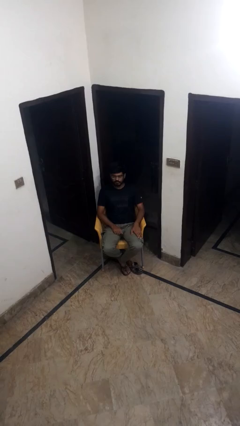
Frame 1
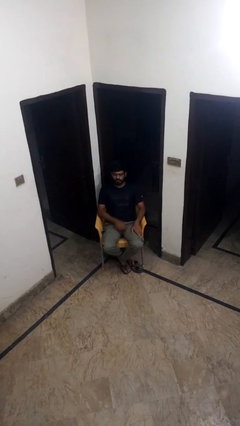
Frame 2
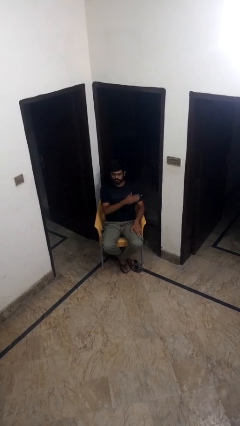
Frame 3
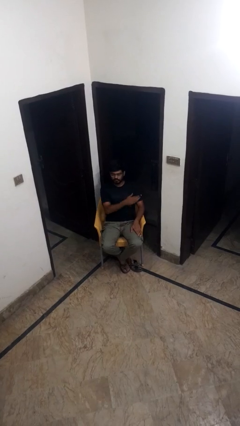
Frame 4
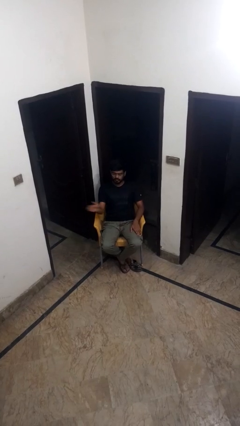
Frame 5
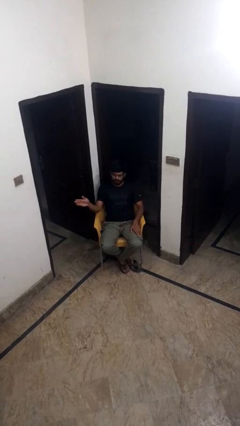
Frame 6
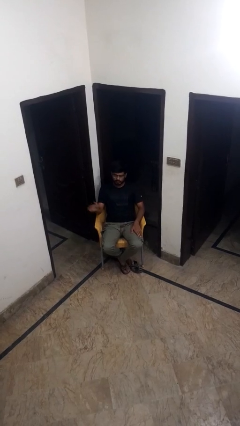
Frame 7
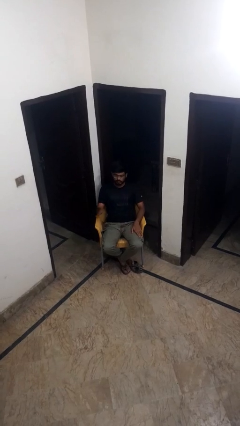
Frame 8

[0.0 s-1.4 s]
person gestures swipe right

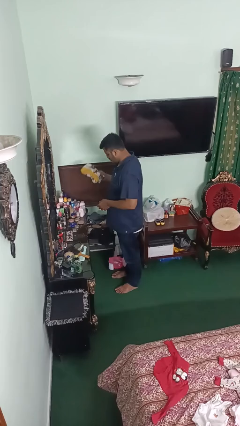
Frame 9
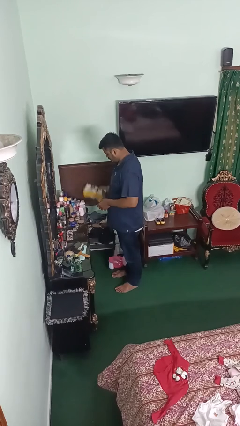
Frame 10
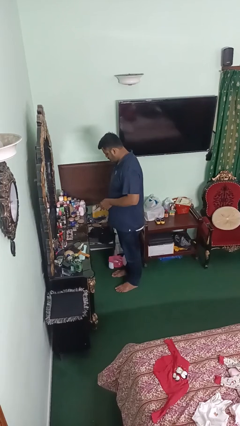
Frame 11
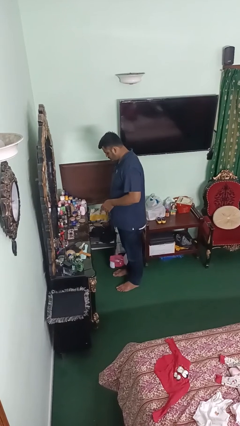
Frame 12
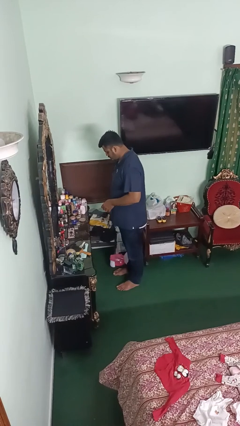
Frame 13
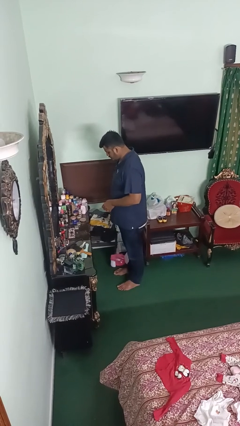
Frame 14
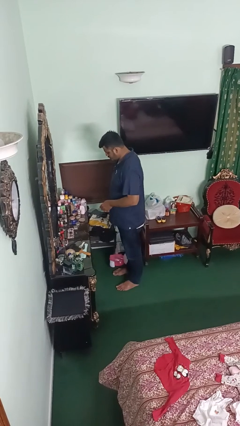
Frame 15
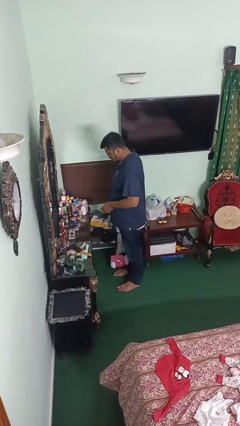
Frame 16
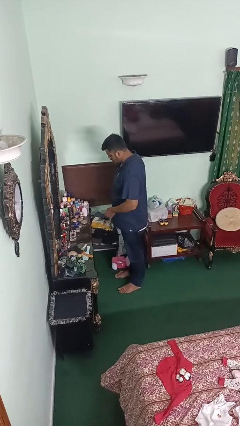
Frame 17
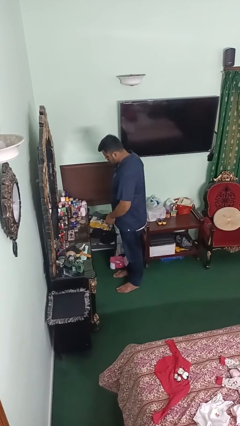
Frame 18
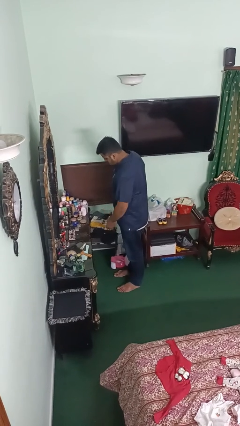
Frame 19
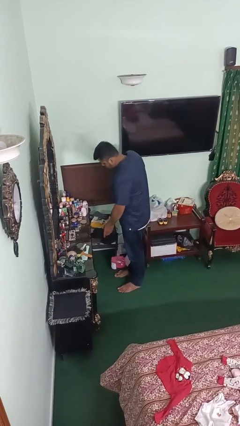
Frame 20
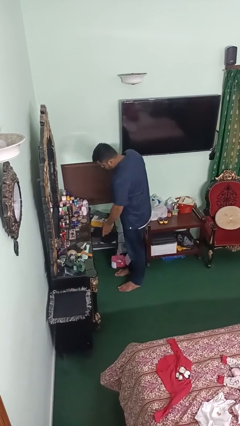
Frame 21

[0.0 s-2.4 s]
person puts clothes into dresser

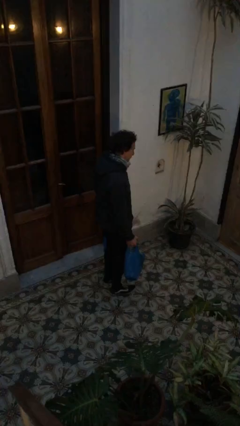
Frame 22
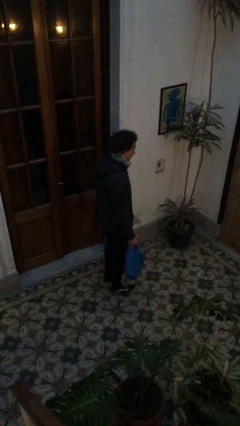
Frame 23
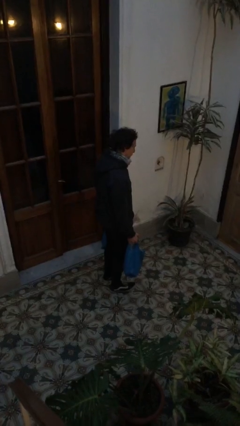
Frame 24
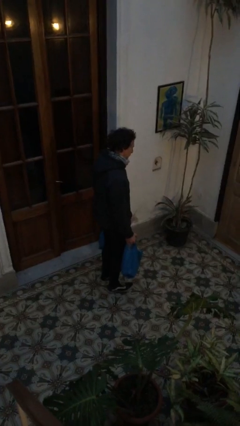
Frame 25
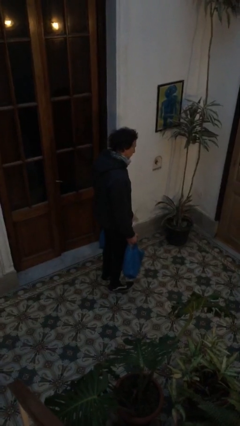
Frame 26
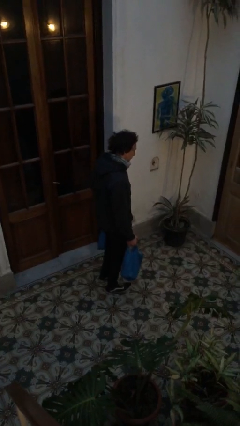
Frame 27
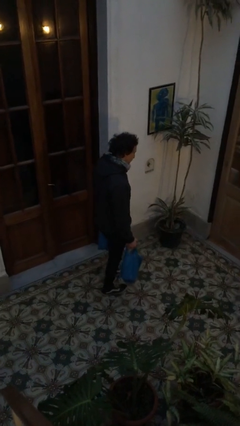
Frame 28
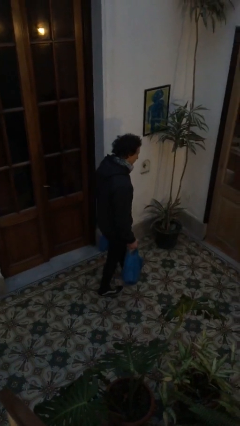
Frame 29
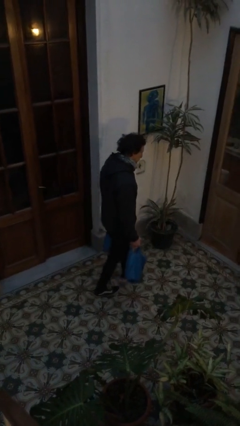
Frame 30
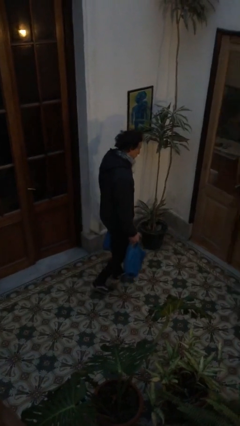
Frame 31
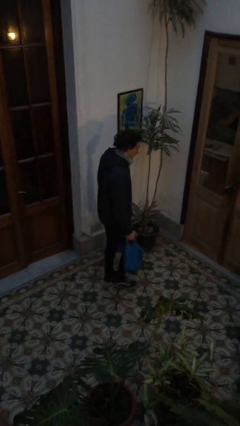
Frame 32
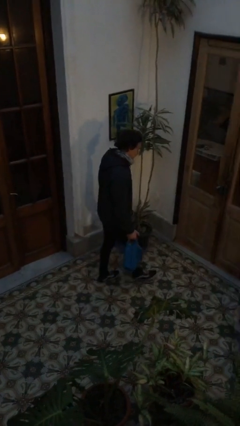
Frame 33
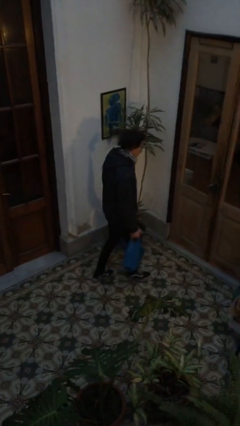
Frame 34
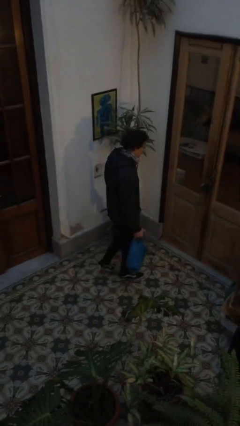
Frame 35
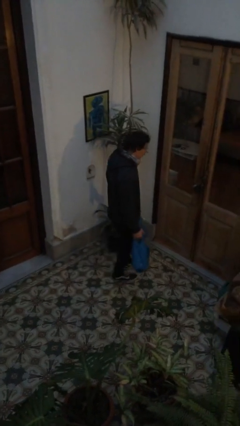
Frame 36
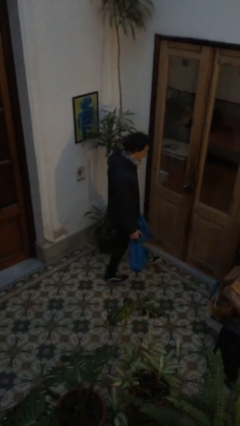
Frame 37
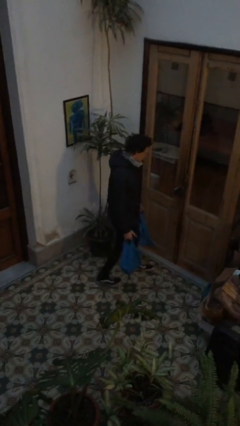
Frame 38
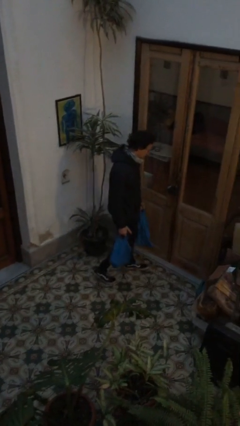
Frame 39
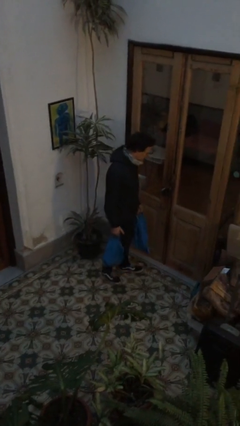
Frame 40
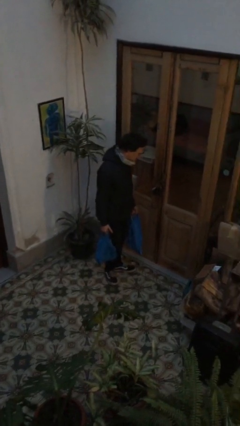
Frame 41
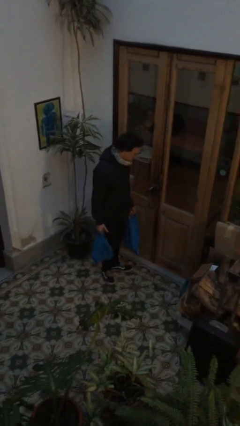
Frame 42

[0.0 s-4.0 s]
person carries groceries

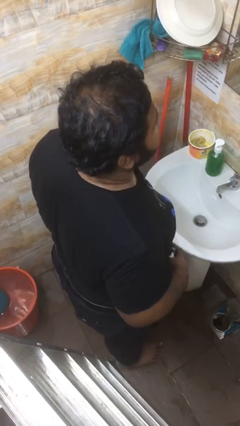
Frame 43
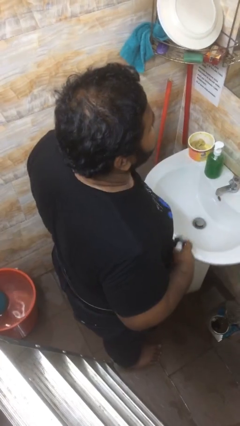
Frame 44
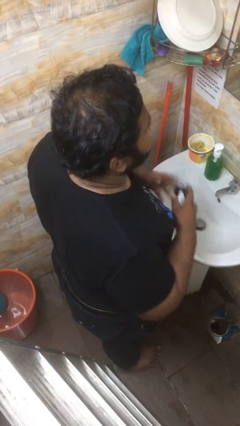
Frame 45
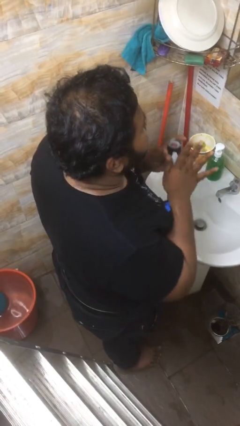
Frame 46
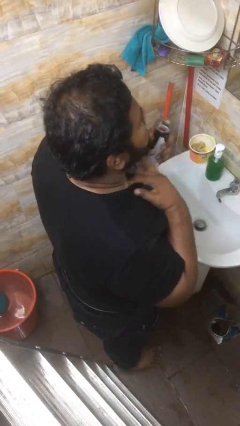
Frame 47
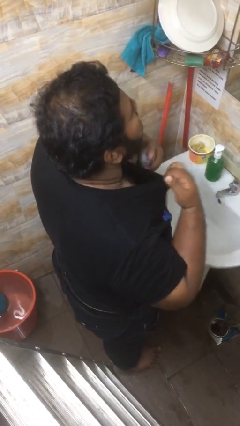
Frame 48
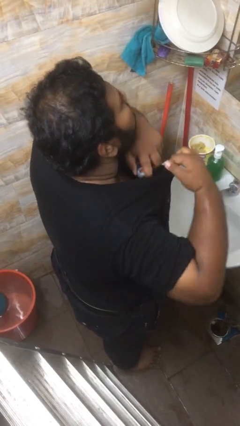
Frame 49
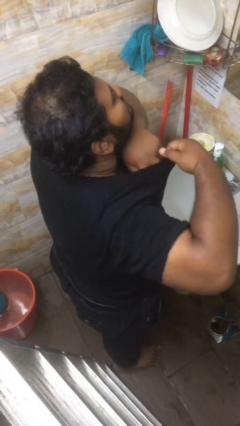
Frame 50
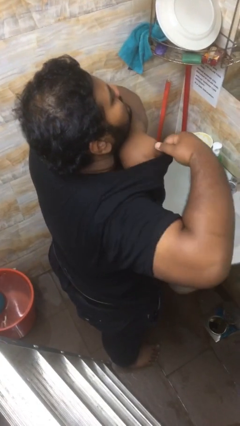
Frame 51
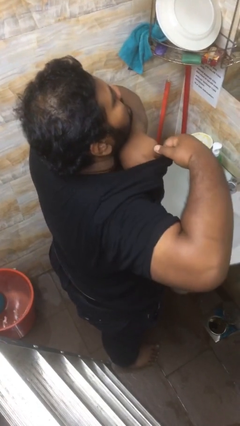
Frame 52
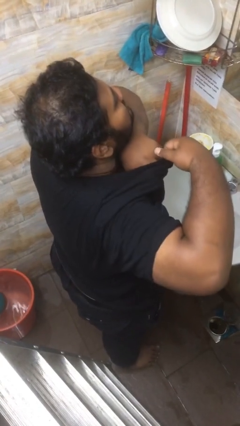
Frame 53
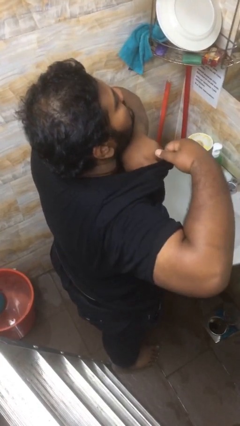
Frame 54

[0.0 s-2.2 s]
person applies deodorant

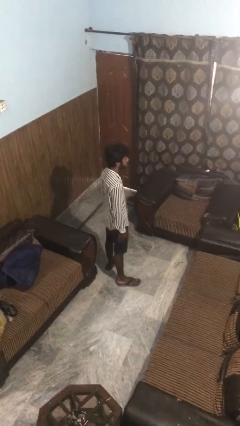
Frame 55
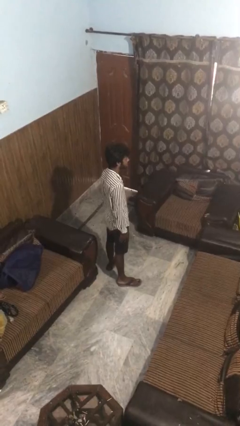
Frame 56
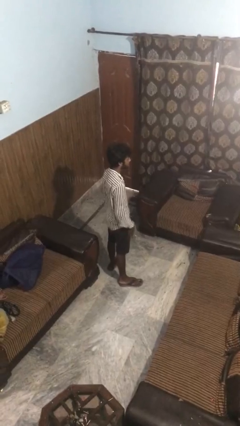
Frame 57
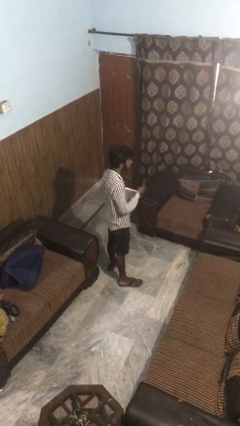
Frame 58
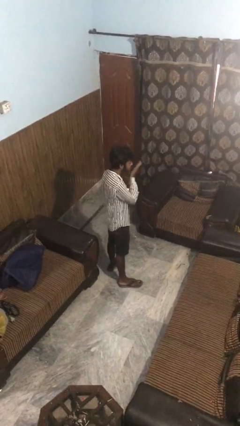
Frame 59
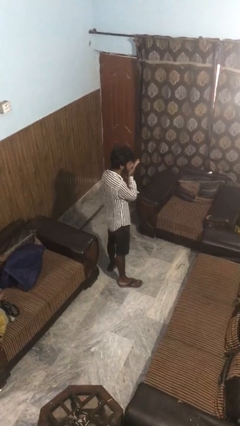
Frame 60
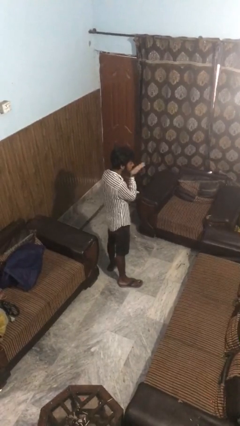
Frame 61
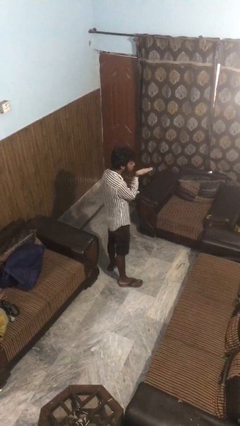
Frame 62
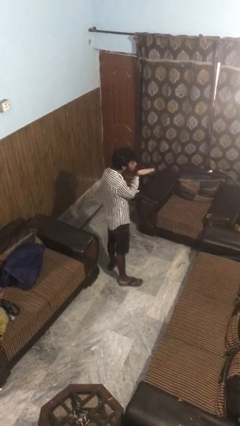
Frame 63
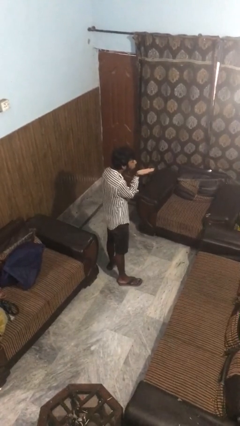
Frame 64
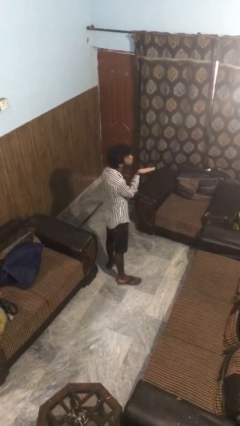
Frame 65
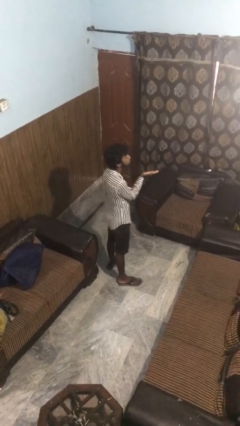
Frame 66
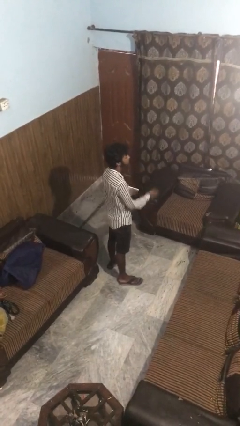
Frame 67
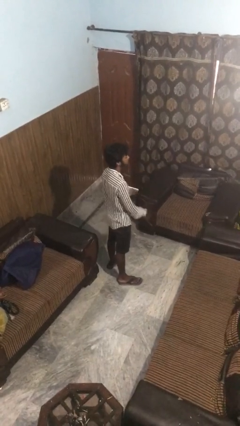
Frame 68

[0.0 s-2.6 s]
person gestures blow kiss

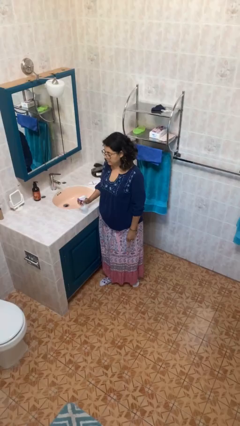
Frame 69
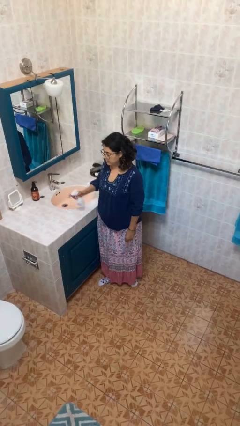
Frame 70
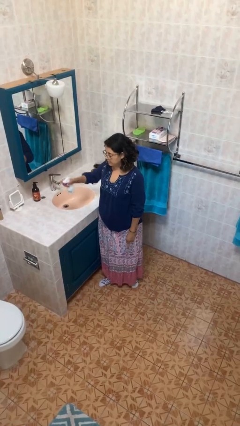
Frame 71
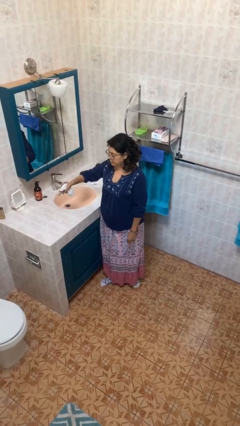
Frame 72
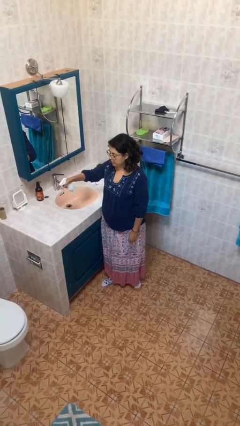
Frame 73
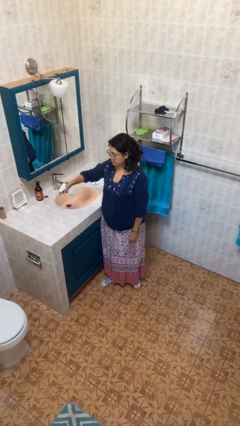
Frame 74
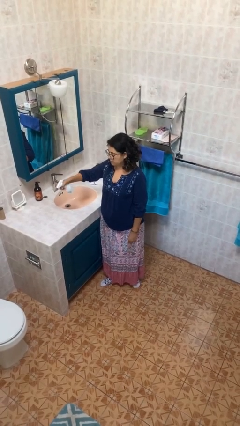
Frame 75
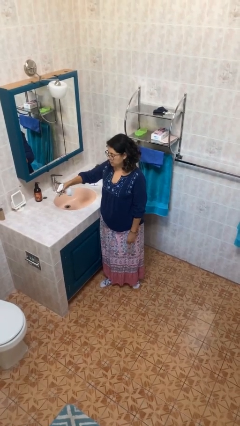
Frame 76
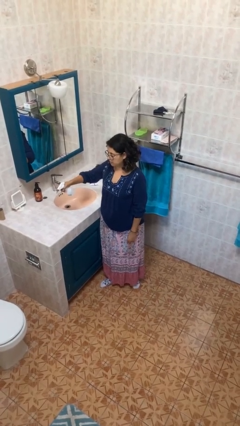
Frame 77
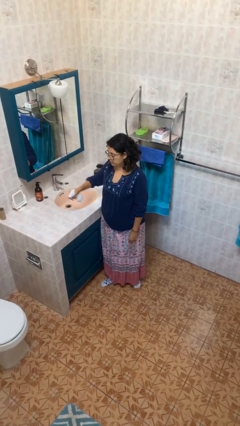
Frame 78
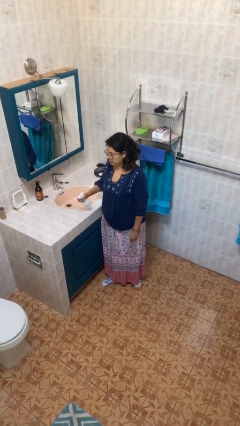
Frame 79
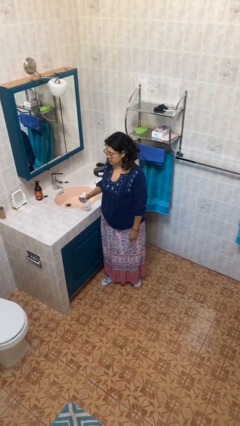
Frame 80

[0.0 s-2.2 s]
person sprays from bottle

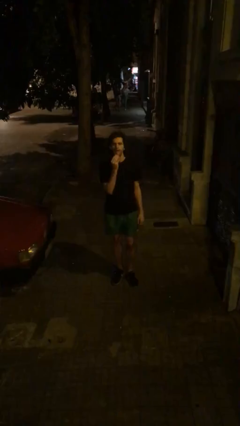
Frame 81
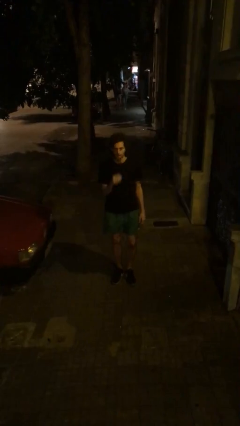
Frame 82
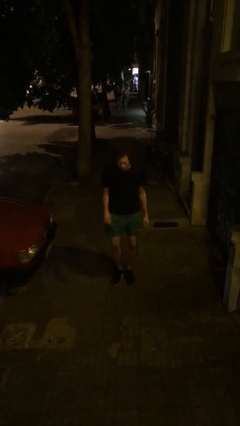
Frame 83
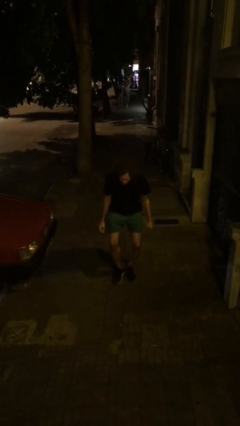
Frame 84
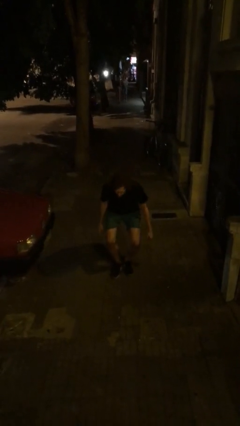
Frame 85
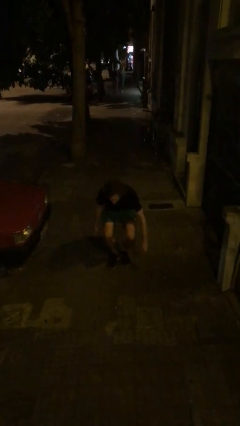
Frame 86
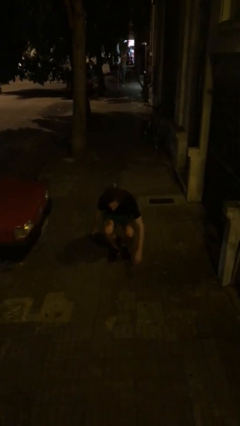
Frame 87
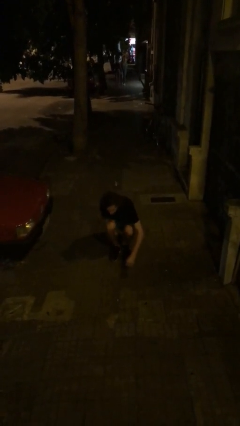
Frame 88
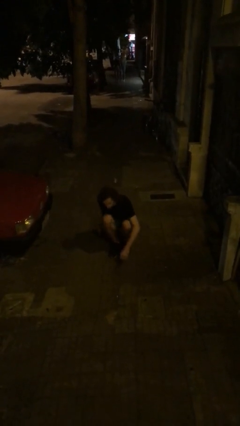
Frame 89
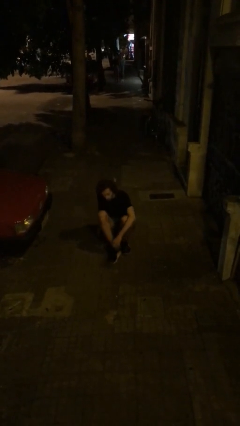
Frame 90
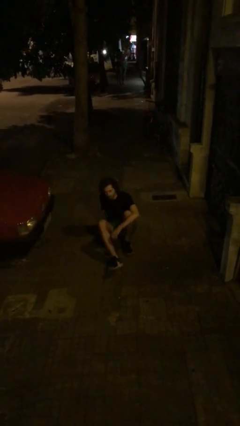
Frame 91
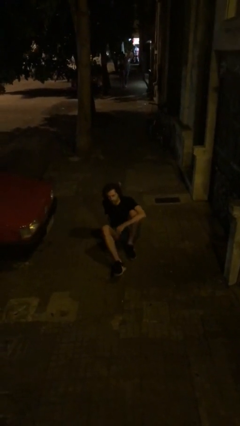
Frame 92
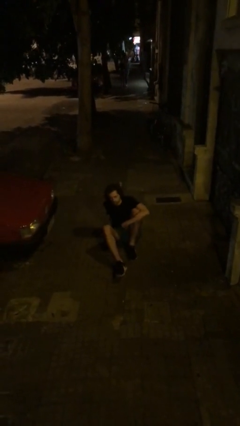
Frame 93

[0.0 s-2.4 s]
person sits down
